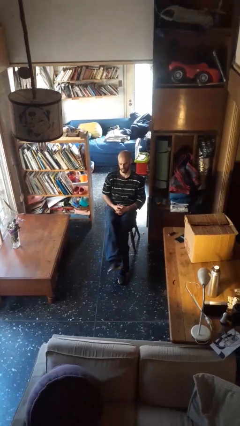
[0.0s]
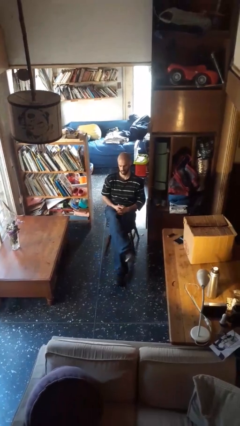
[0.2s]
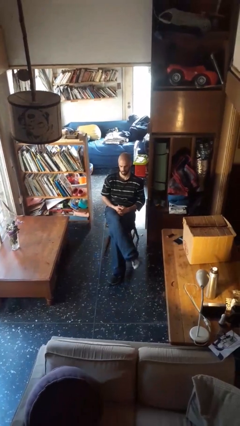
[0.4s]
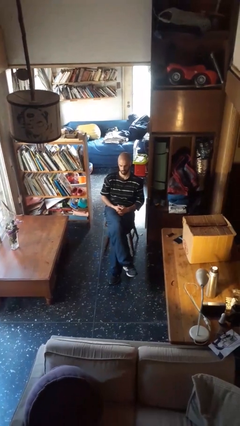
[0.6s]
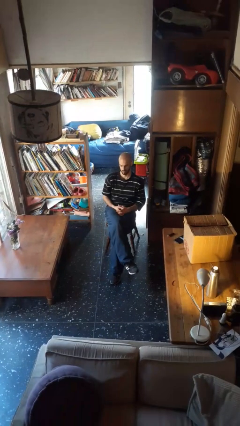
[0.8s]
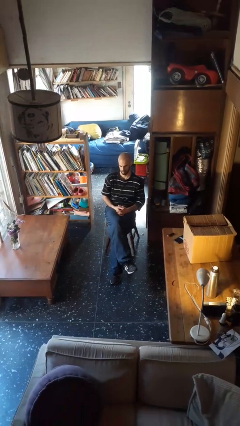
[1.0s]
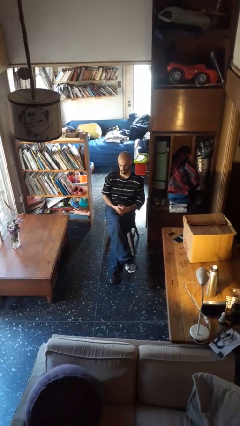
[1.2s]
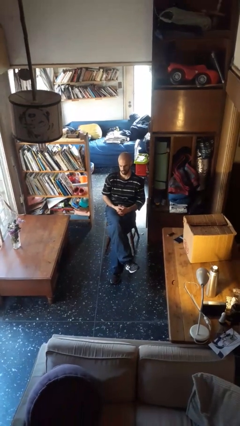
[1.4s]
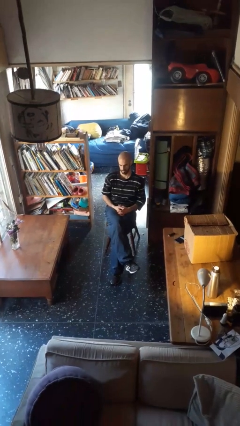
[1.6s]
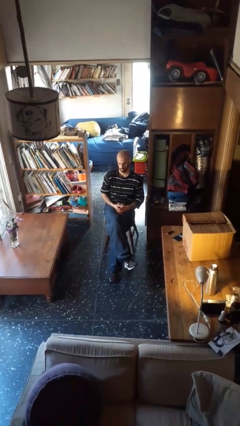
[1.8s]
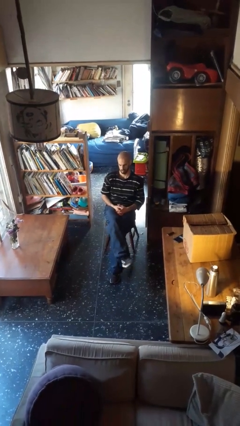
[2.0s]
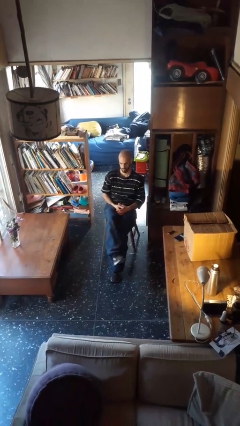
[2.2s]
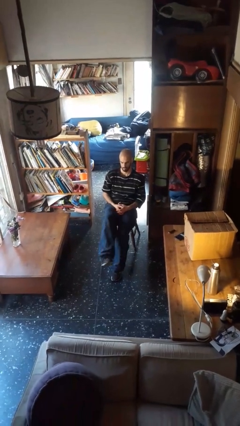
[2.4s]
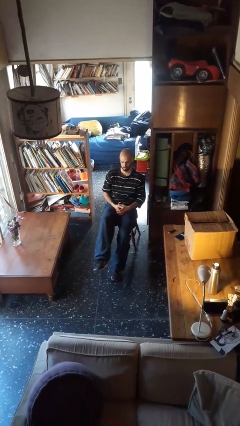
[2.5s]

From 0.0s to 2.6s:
person crosses legs

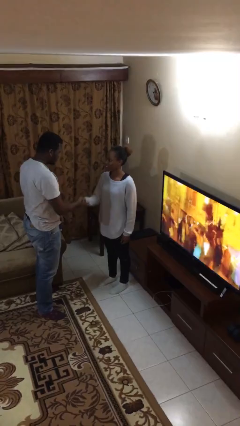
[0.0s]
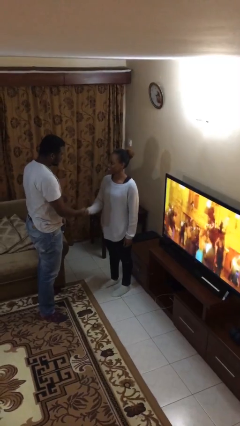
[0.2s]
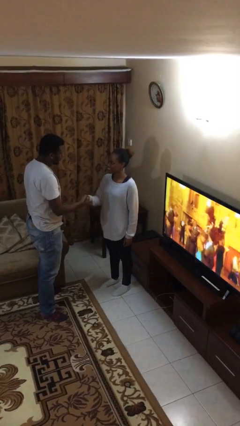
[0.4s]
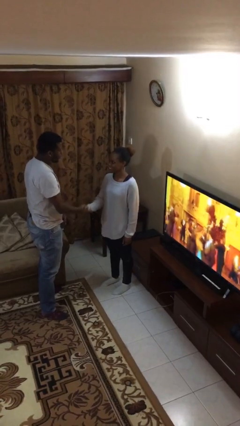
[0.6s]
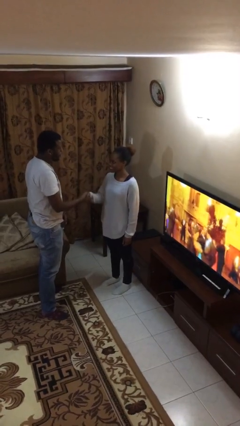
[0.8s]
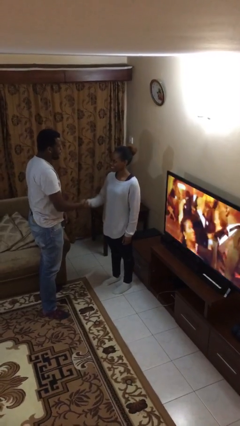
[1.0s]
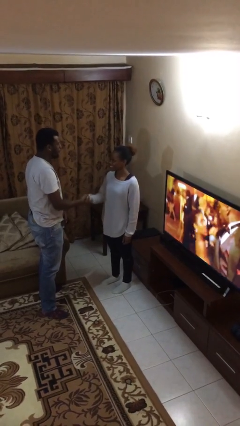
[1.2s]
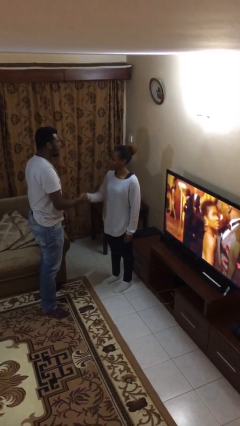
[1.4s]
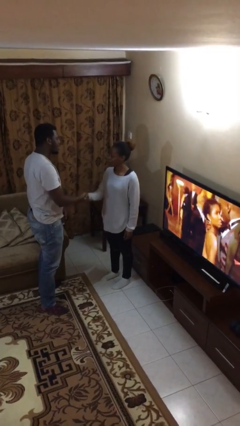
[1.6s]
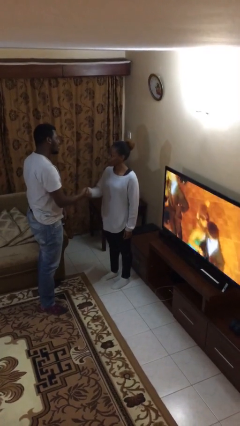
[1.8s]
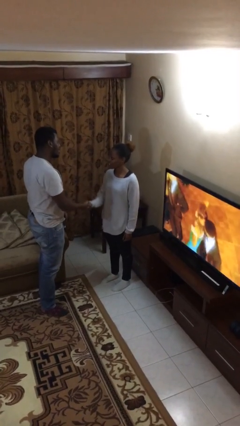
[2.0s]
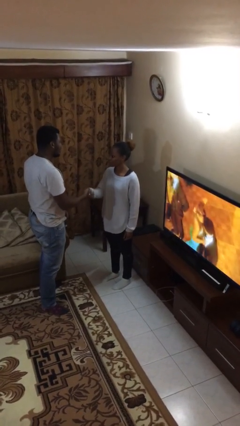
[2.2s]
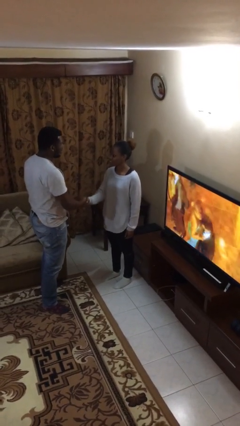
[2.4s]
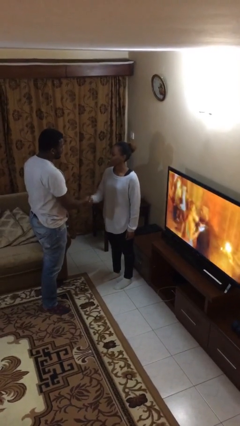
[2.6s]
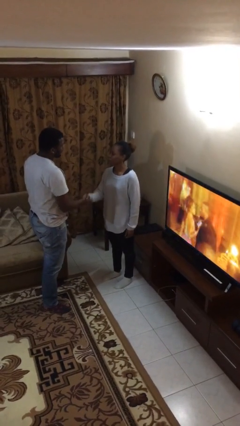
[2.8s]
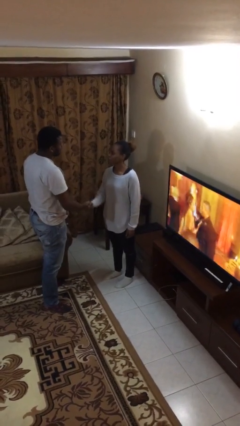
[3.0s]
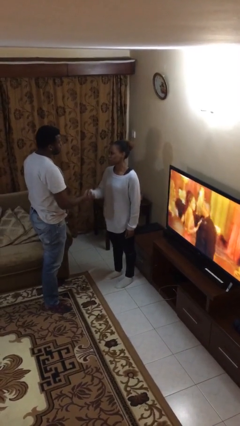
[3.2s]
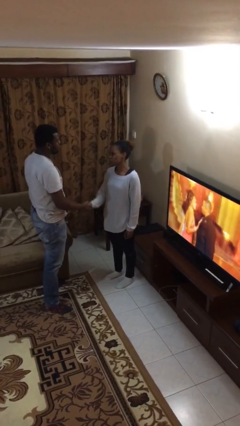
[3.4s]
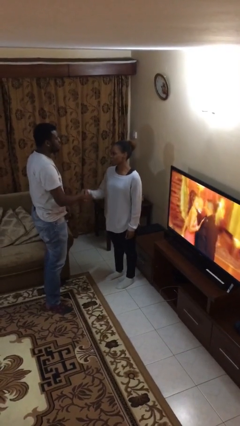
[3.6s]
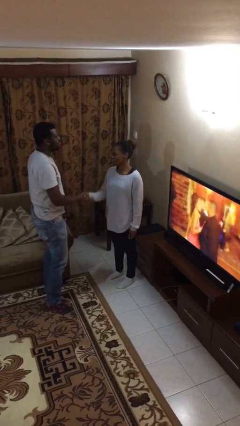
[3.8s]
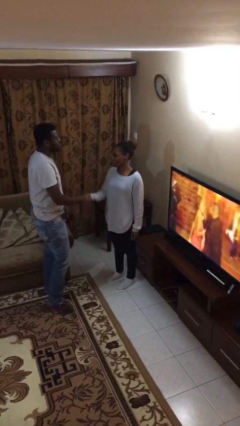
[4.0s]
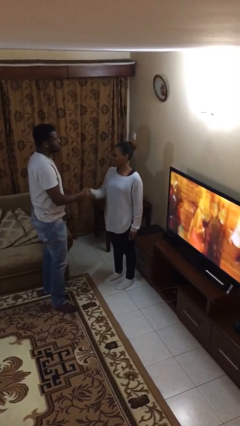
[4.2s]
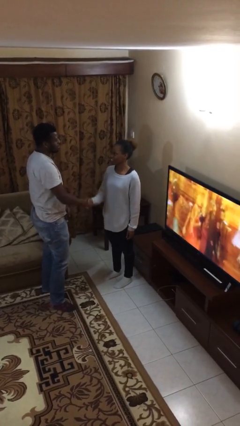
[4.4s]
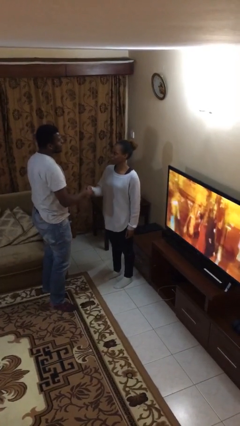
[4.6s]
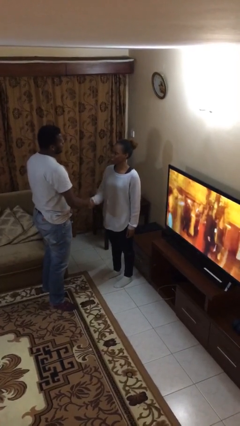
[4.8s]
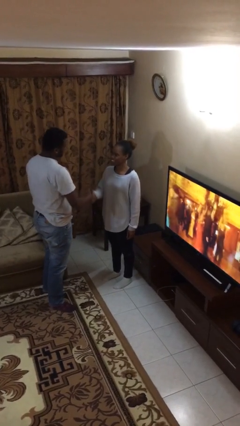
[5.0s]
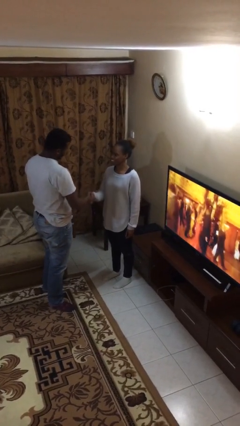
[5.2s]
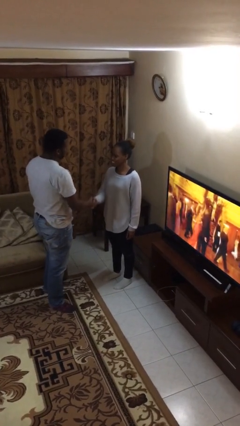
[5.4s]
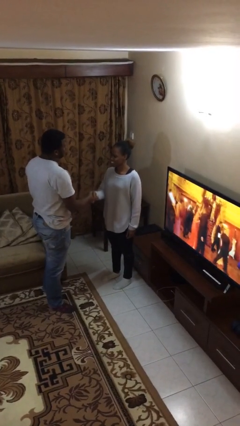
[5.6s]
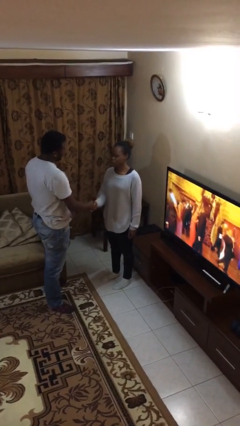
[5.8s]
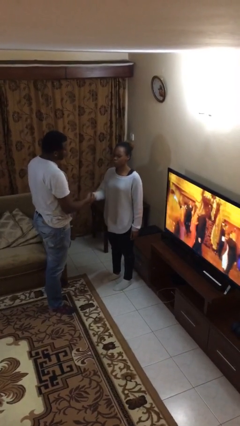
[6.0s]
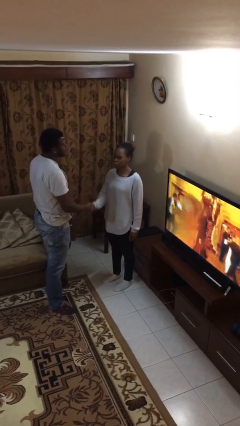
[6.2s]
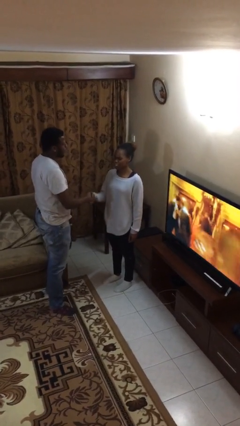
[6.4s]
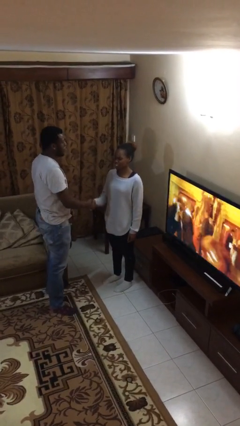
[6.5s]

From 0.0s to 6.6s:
person shakes hand

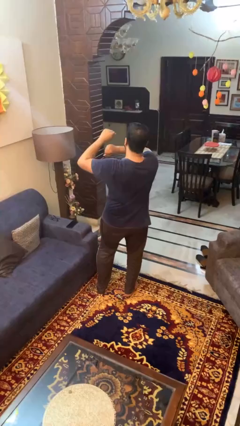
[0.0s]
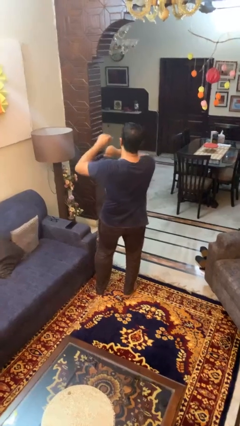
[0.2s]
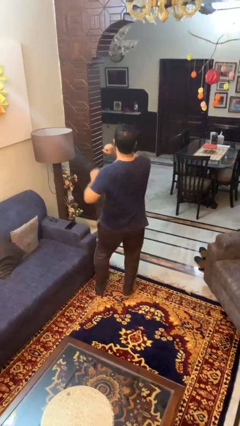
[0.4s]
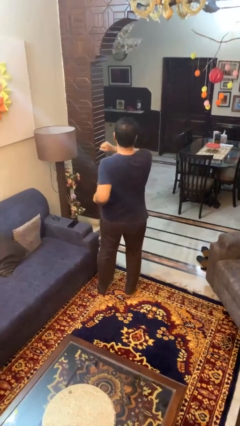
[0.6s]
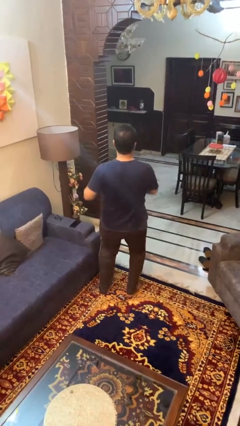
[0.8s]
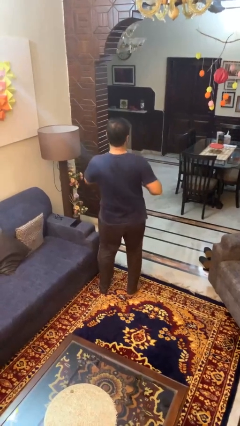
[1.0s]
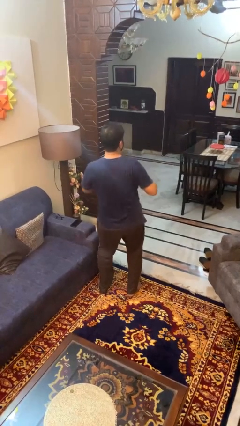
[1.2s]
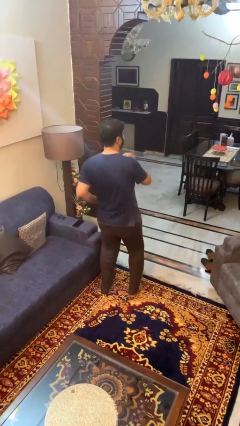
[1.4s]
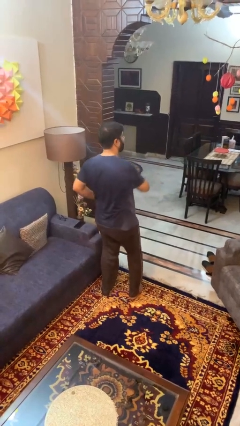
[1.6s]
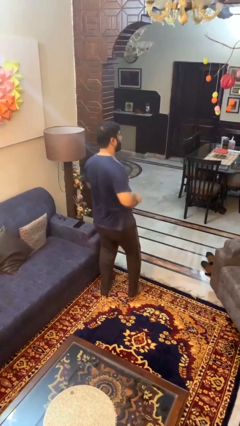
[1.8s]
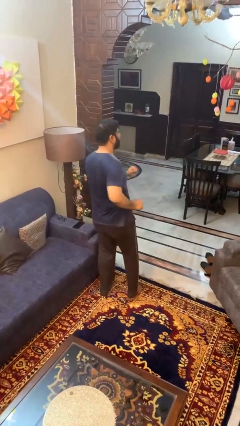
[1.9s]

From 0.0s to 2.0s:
person dances in place

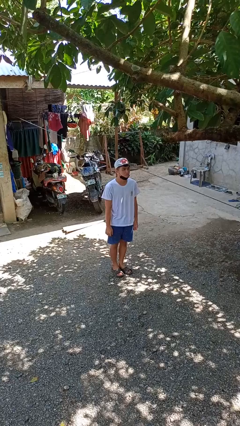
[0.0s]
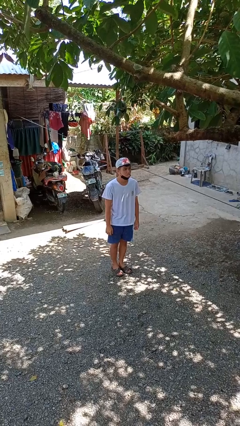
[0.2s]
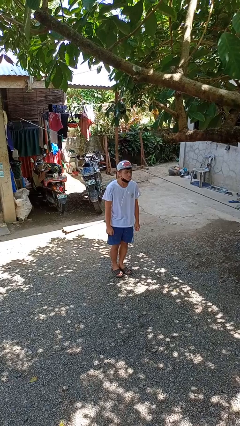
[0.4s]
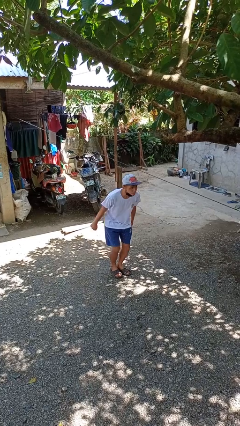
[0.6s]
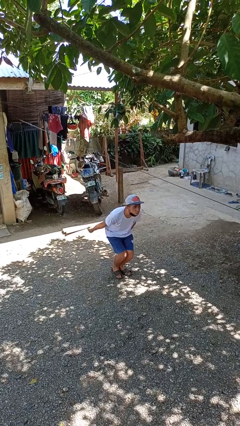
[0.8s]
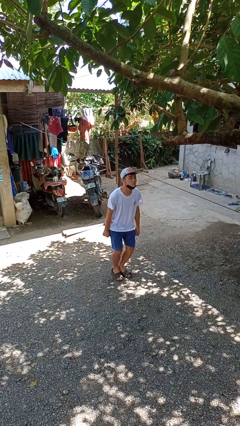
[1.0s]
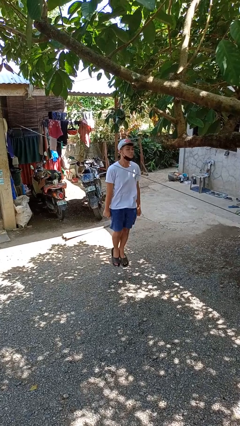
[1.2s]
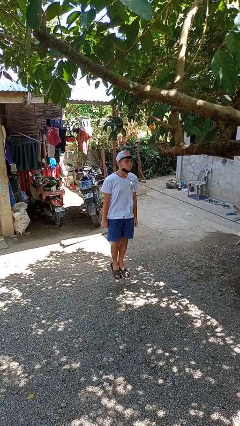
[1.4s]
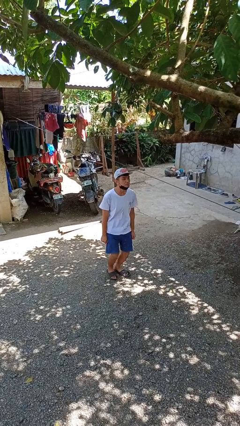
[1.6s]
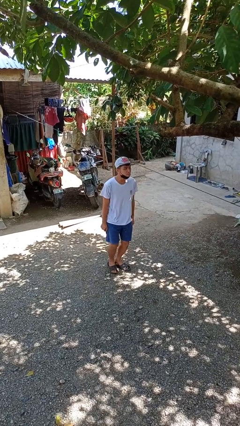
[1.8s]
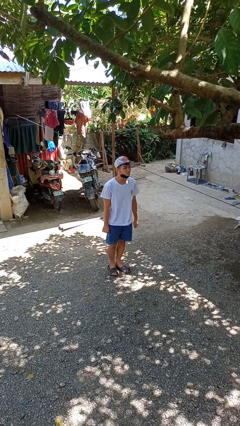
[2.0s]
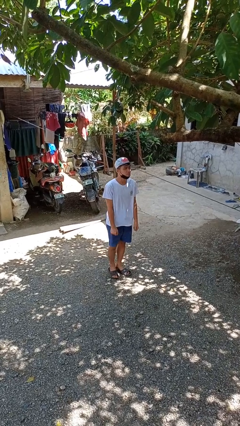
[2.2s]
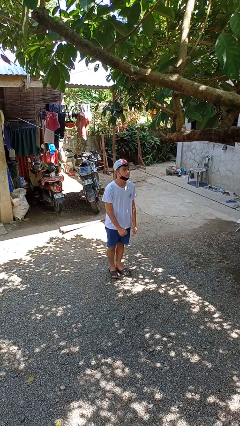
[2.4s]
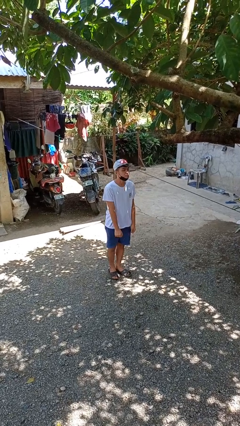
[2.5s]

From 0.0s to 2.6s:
person jumps

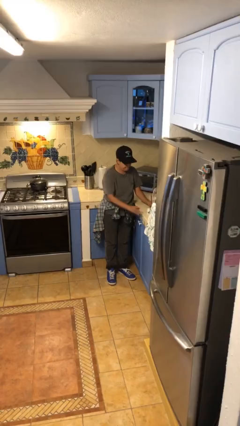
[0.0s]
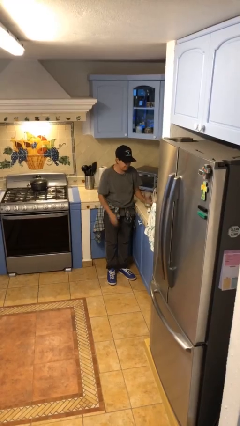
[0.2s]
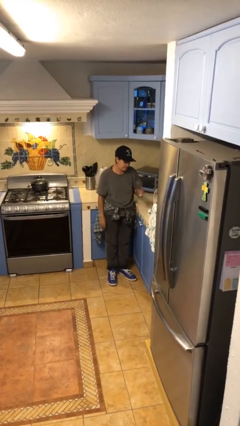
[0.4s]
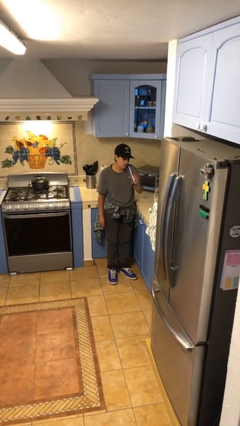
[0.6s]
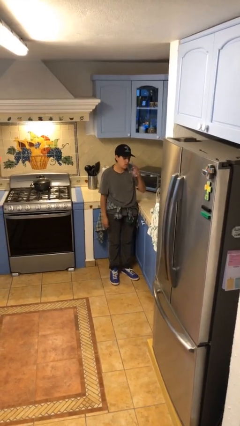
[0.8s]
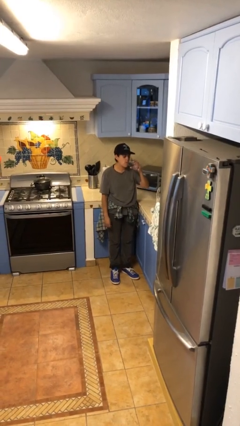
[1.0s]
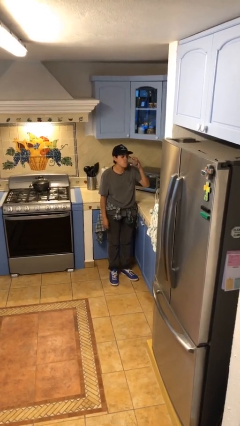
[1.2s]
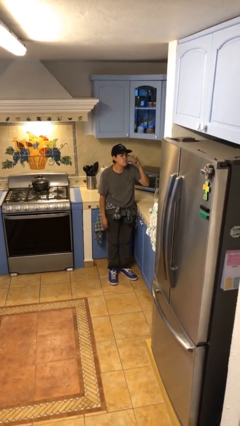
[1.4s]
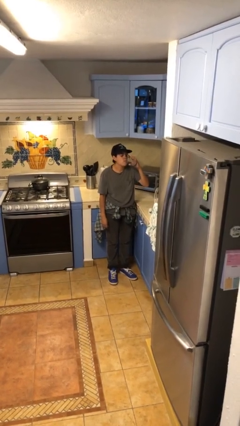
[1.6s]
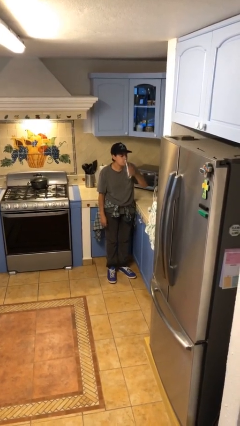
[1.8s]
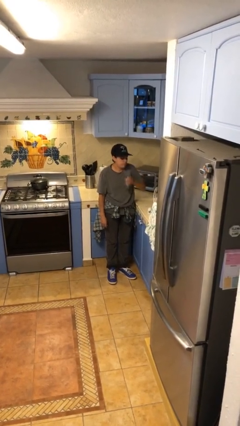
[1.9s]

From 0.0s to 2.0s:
person drinks from cup

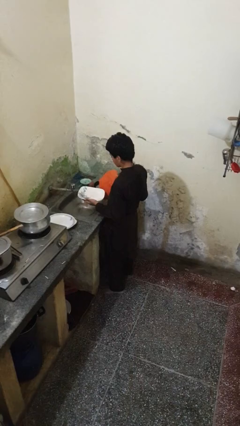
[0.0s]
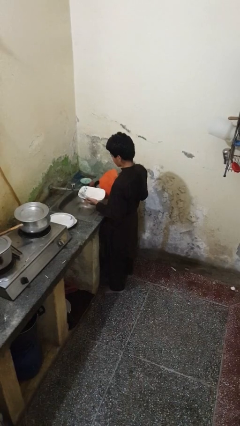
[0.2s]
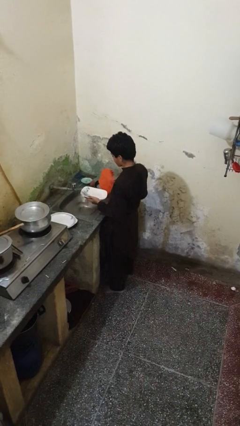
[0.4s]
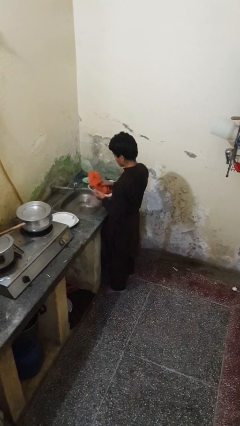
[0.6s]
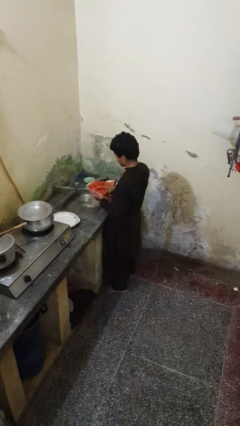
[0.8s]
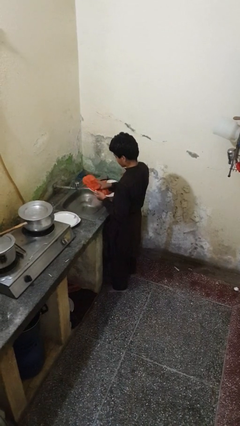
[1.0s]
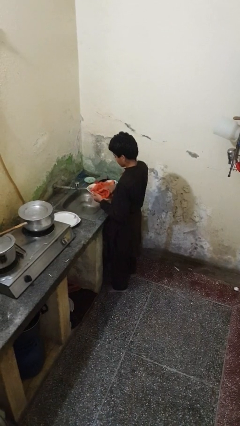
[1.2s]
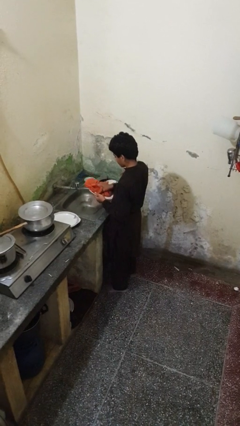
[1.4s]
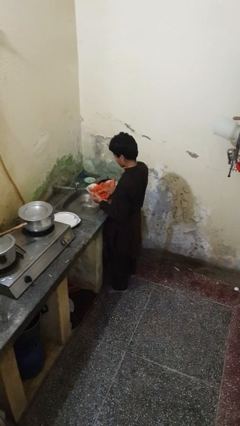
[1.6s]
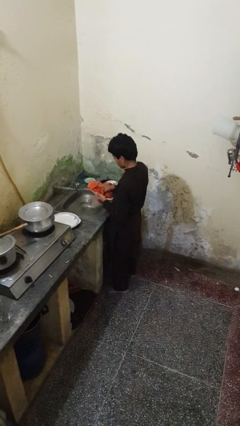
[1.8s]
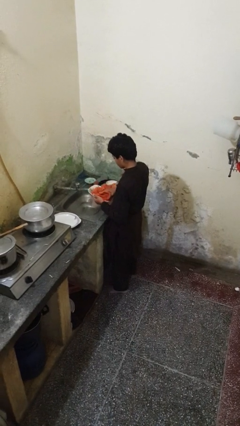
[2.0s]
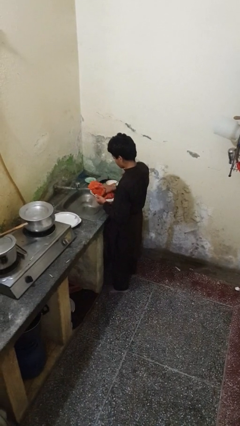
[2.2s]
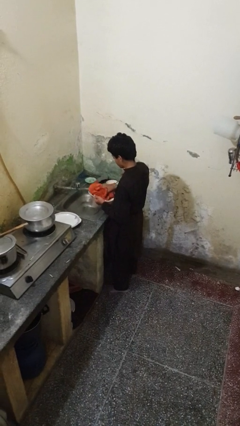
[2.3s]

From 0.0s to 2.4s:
person dries dish
